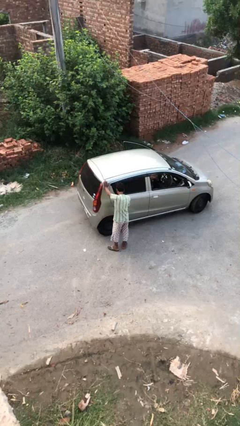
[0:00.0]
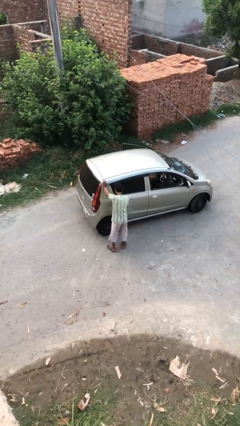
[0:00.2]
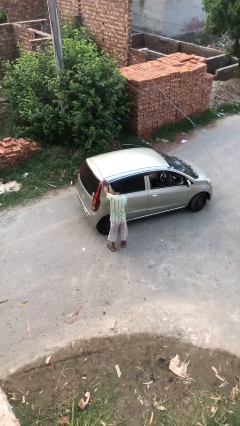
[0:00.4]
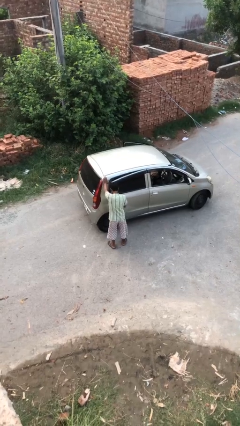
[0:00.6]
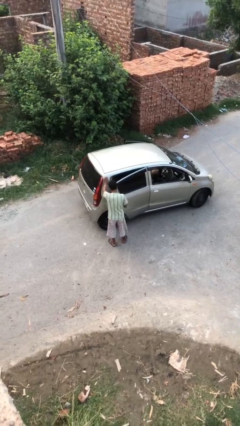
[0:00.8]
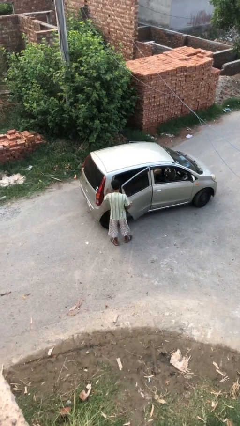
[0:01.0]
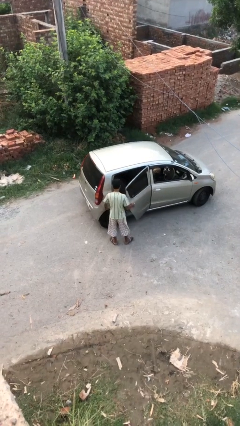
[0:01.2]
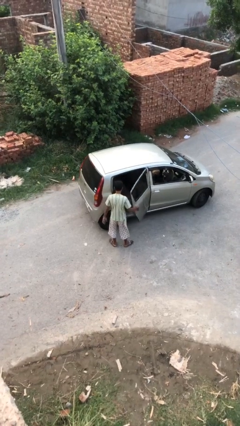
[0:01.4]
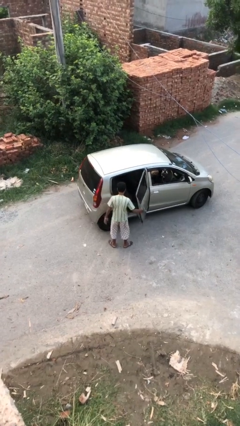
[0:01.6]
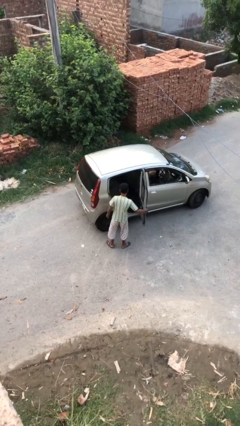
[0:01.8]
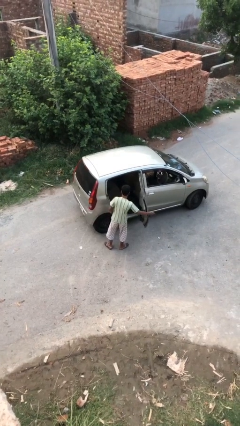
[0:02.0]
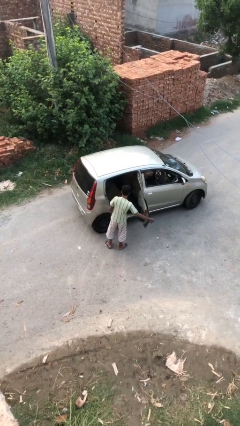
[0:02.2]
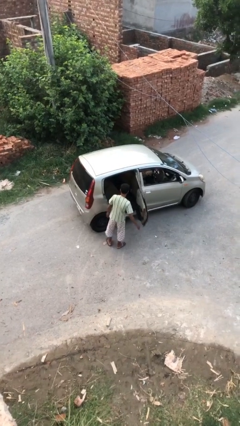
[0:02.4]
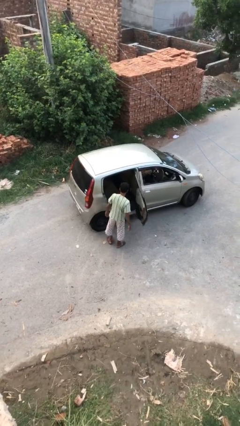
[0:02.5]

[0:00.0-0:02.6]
person opens car door

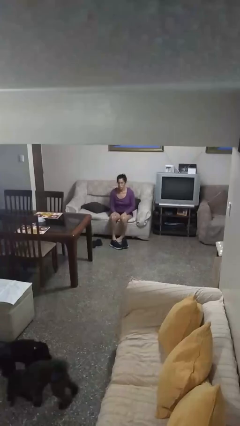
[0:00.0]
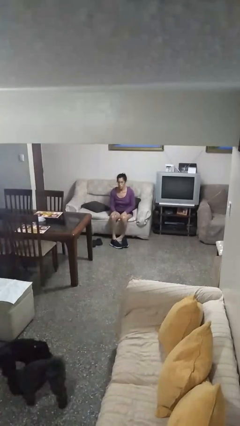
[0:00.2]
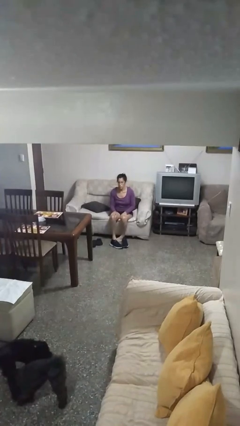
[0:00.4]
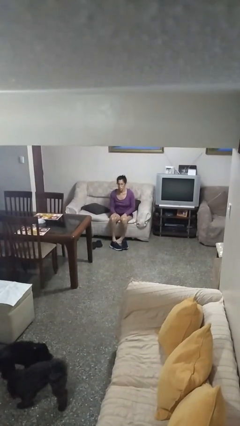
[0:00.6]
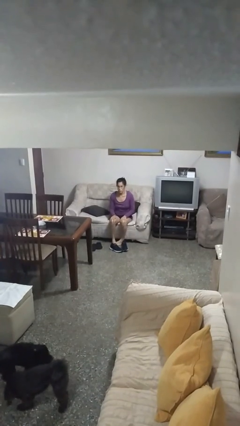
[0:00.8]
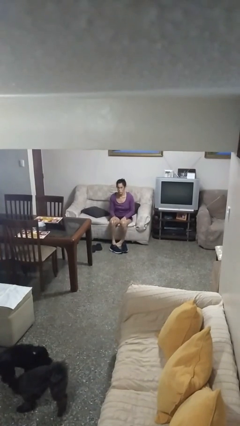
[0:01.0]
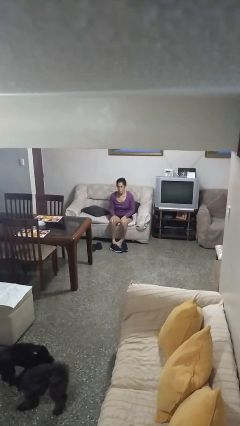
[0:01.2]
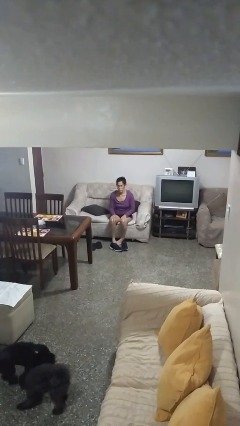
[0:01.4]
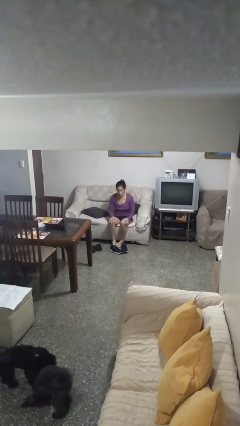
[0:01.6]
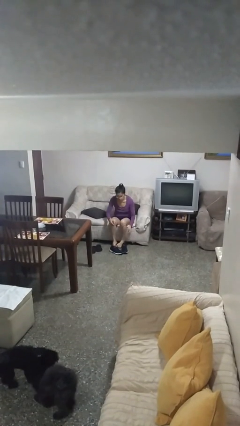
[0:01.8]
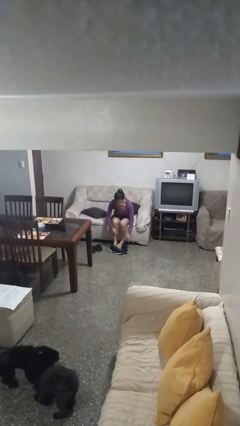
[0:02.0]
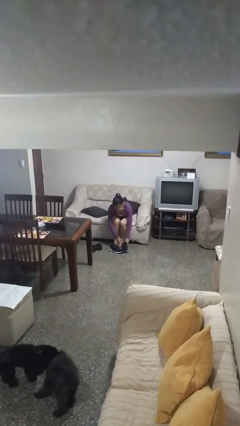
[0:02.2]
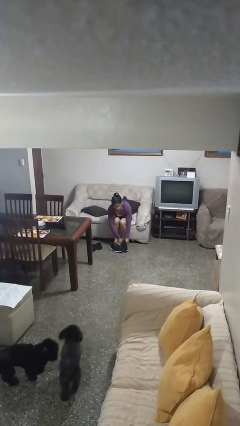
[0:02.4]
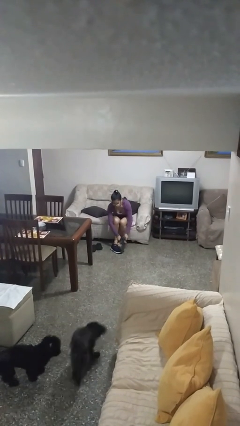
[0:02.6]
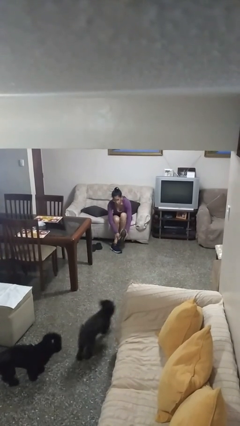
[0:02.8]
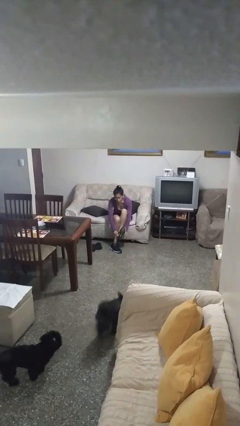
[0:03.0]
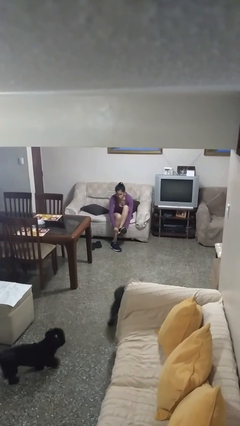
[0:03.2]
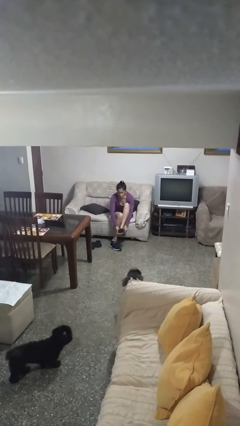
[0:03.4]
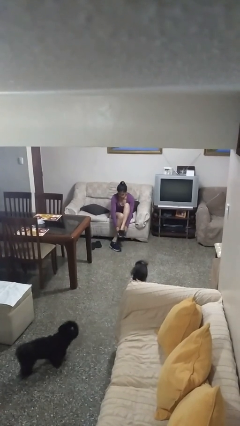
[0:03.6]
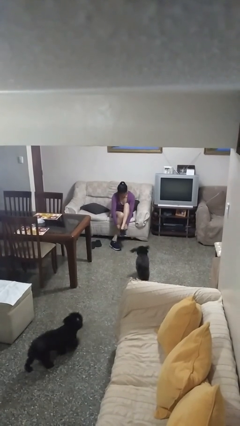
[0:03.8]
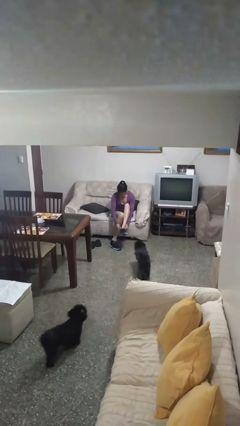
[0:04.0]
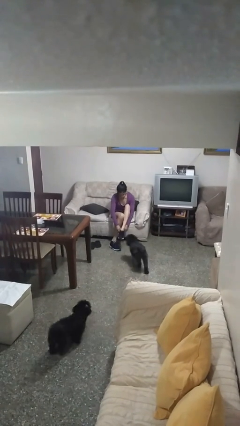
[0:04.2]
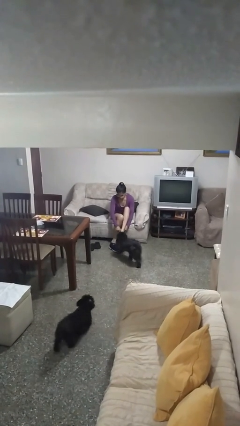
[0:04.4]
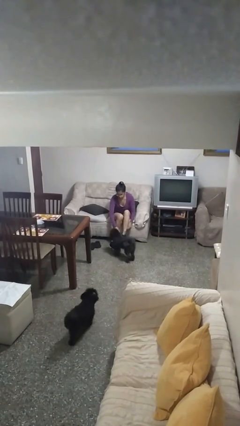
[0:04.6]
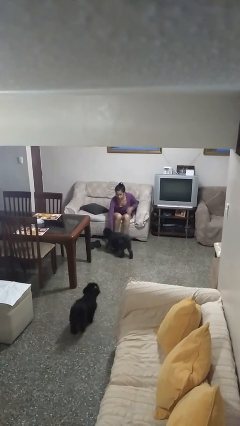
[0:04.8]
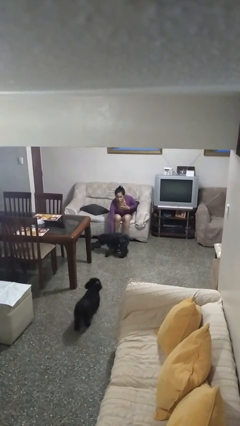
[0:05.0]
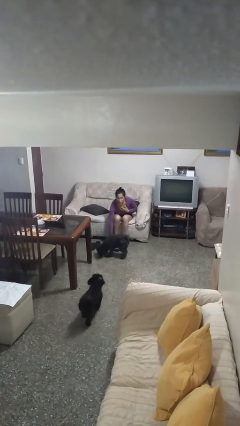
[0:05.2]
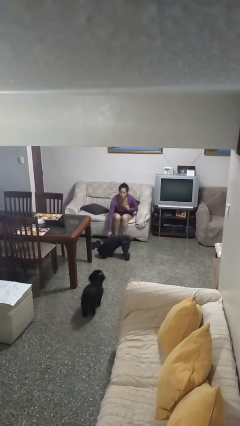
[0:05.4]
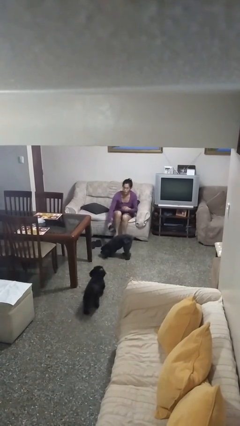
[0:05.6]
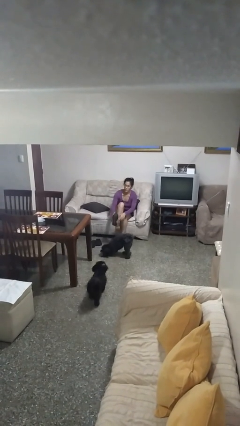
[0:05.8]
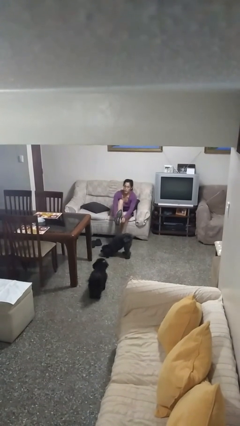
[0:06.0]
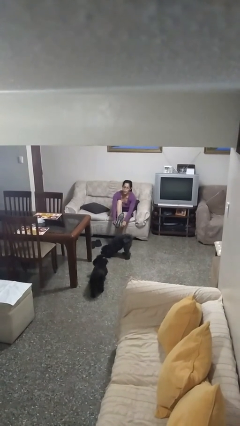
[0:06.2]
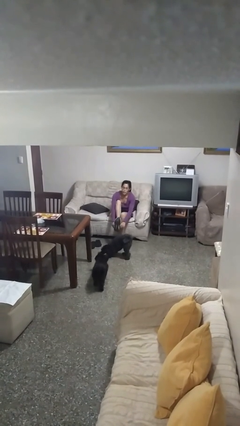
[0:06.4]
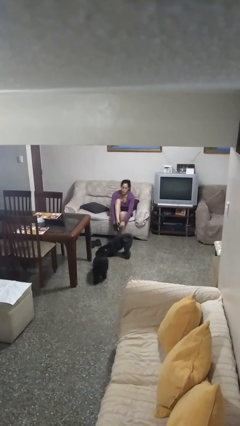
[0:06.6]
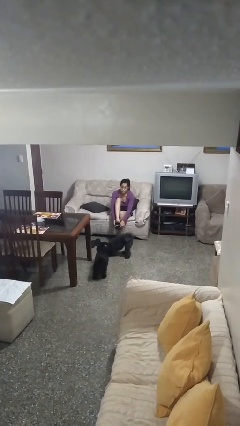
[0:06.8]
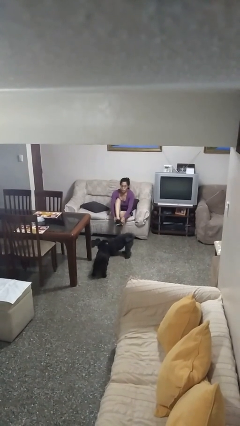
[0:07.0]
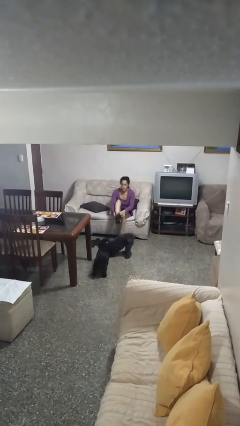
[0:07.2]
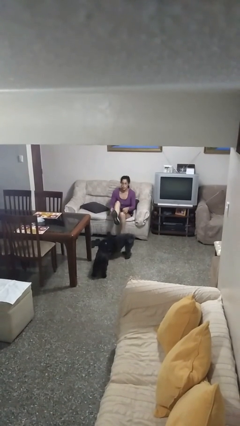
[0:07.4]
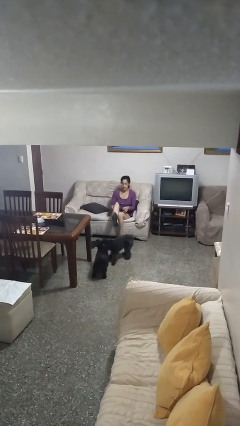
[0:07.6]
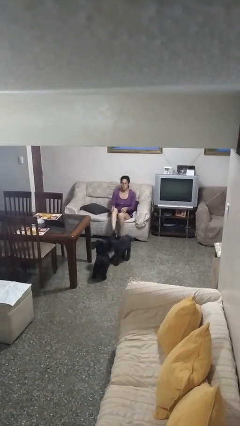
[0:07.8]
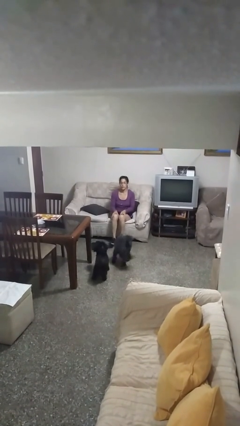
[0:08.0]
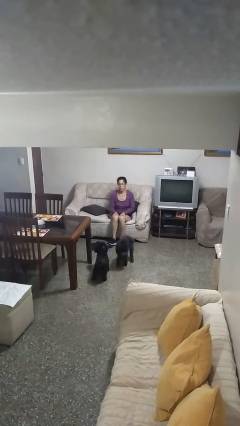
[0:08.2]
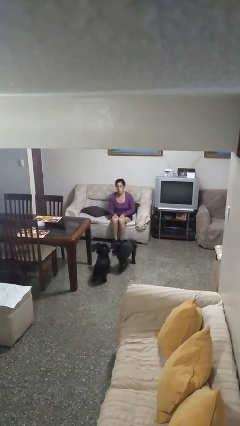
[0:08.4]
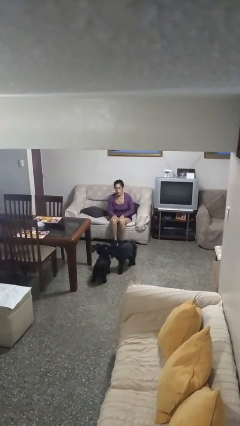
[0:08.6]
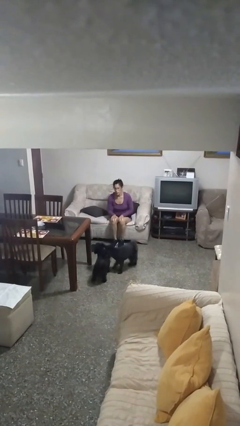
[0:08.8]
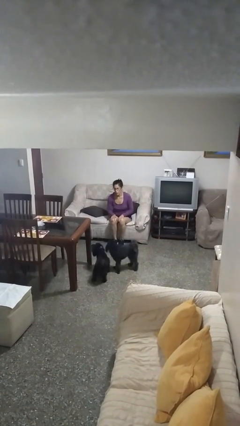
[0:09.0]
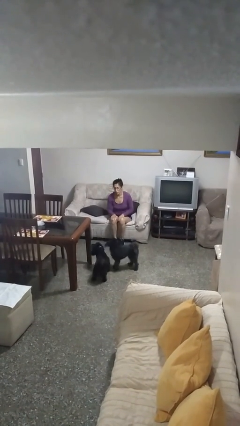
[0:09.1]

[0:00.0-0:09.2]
person puts on shoes

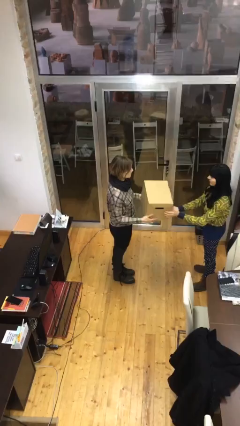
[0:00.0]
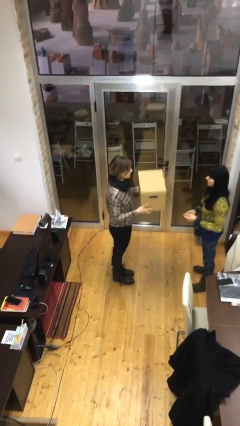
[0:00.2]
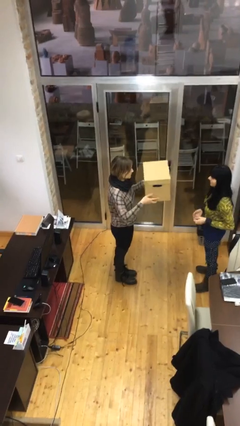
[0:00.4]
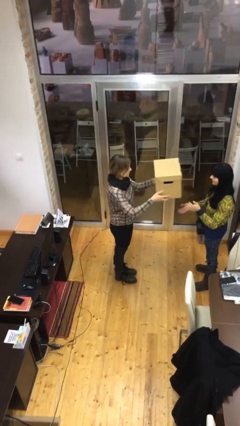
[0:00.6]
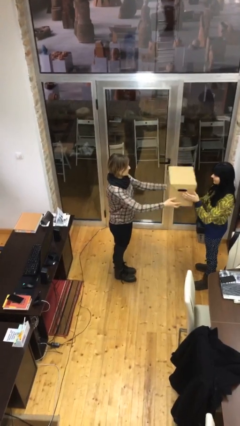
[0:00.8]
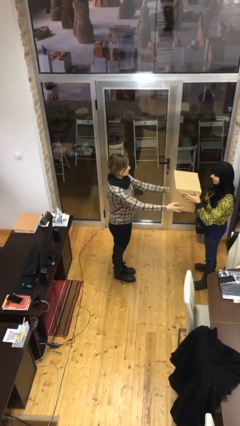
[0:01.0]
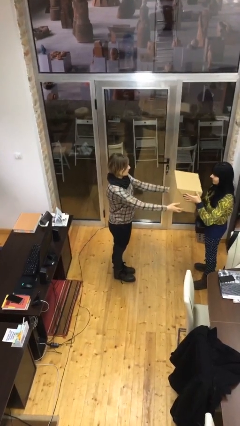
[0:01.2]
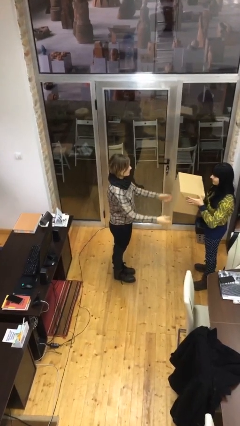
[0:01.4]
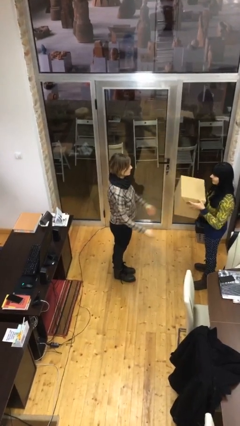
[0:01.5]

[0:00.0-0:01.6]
person transfers object to person

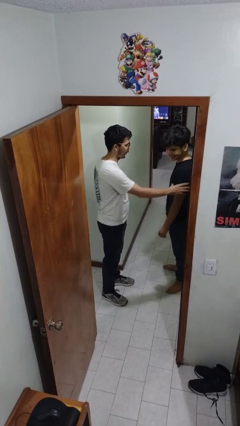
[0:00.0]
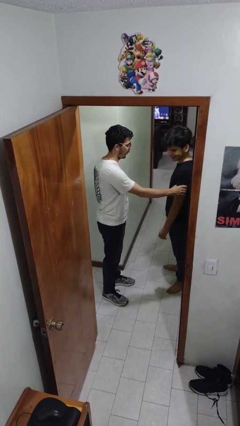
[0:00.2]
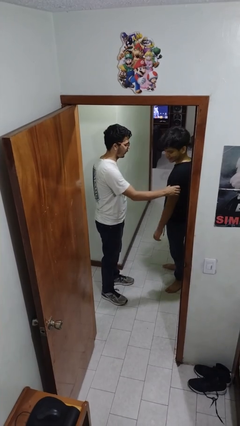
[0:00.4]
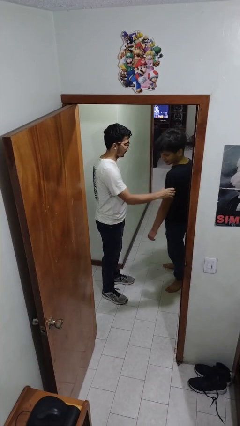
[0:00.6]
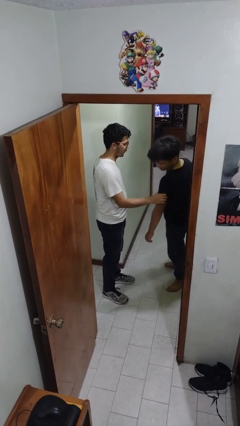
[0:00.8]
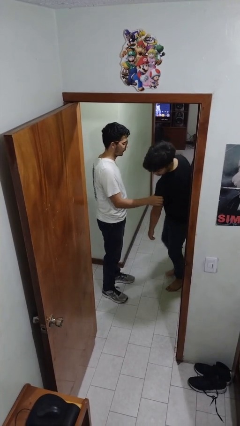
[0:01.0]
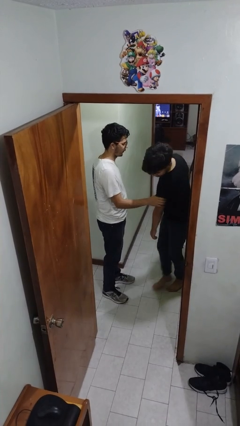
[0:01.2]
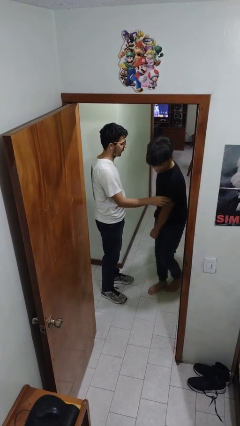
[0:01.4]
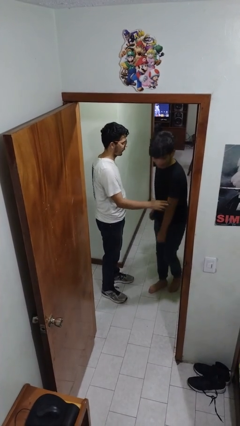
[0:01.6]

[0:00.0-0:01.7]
person grabs person by bicep

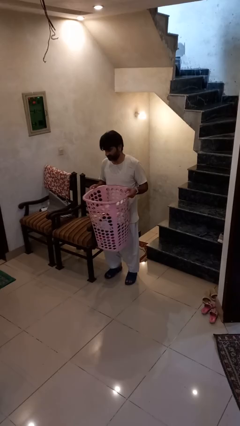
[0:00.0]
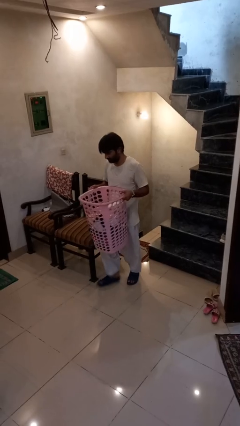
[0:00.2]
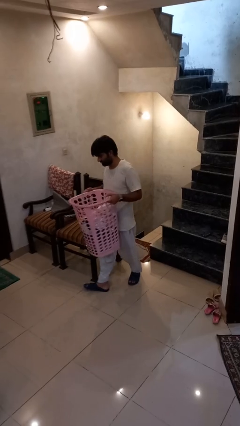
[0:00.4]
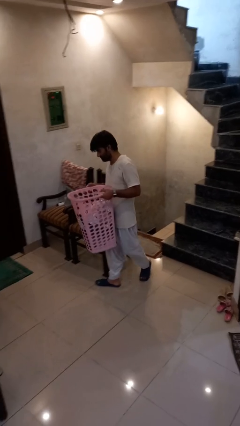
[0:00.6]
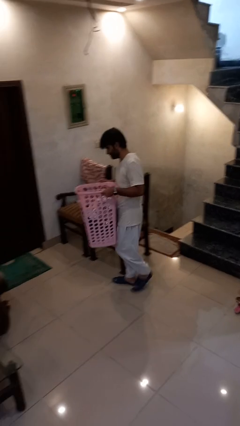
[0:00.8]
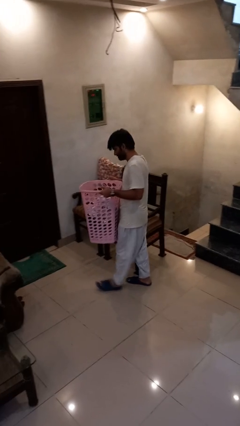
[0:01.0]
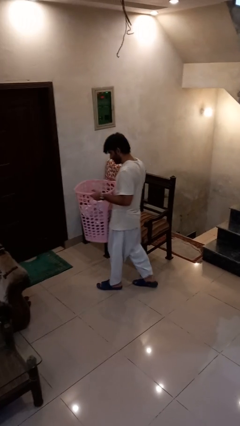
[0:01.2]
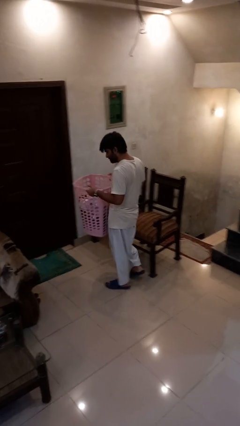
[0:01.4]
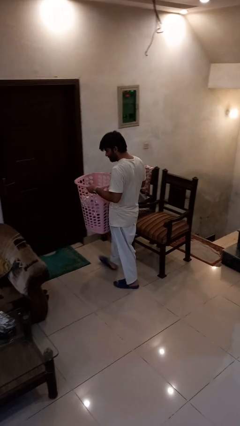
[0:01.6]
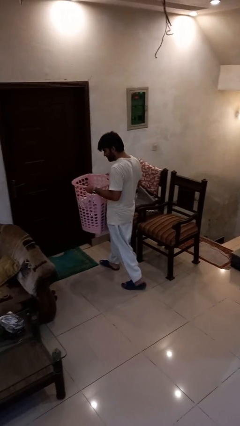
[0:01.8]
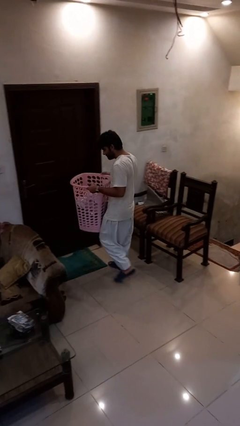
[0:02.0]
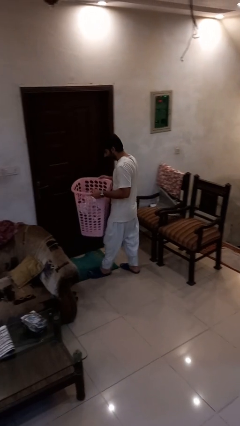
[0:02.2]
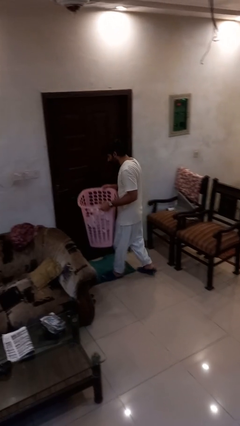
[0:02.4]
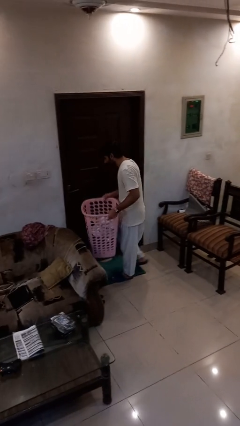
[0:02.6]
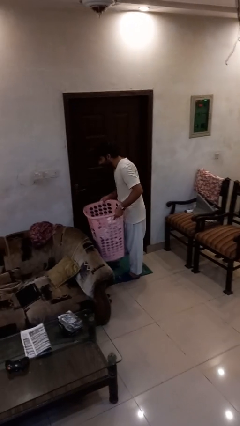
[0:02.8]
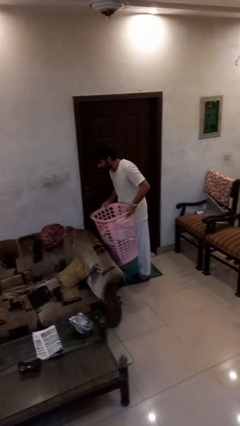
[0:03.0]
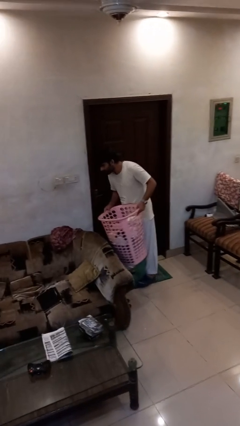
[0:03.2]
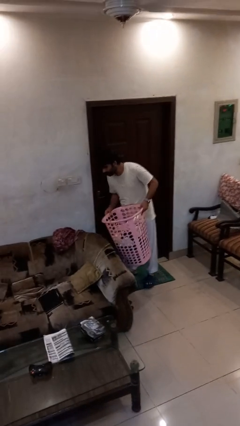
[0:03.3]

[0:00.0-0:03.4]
person carries laundry basket
